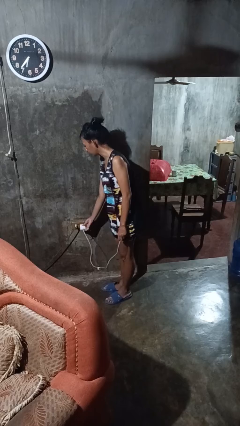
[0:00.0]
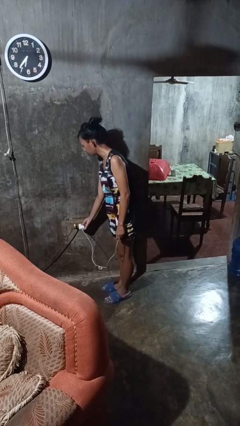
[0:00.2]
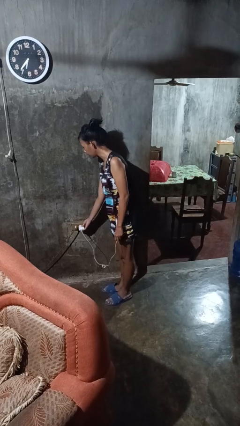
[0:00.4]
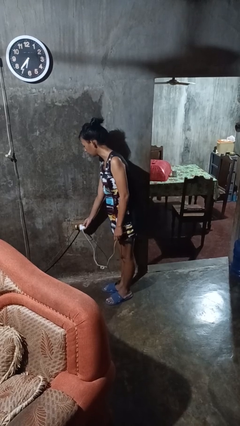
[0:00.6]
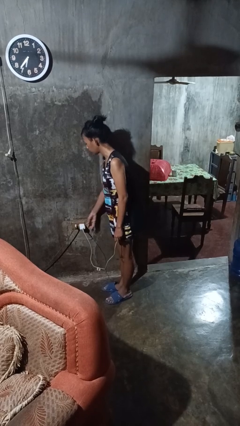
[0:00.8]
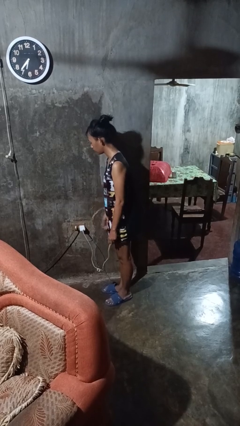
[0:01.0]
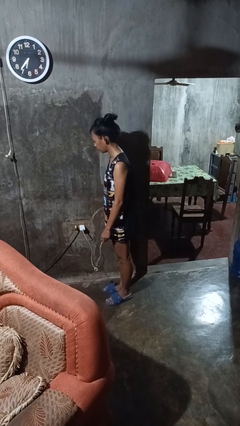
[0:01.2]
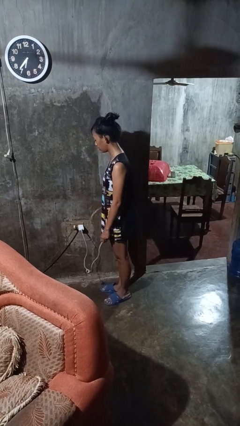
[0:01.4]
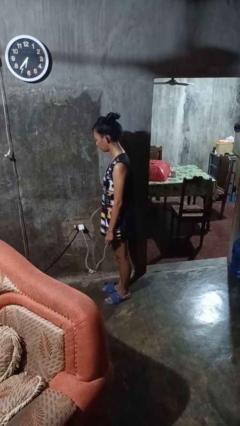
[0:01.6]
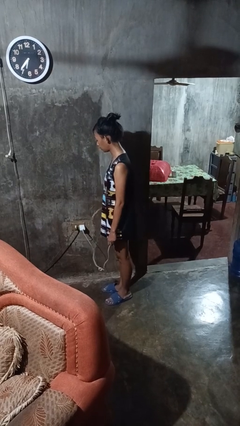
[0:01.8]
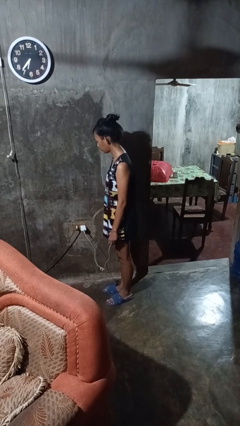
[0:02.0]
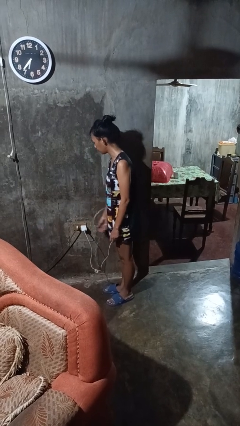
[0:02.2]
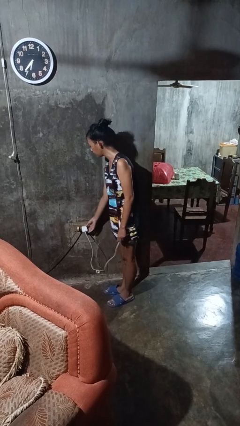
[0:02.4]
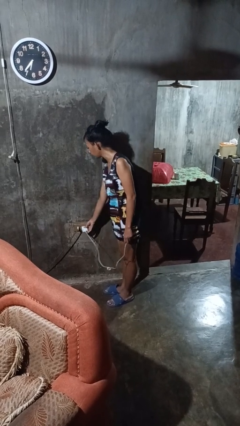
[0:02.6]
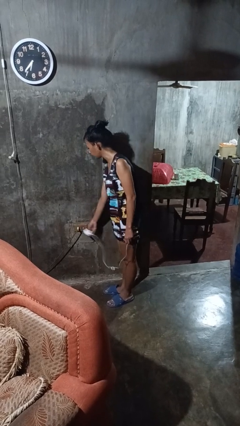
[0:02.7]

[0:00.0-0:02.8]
person plugs into electrical socket

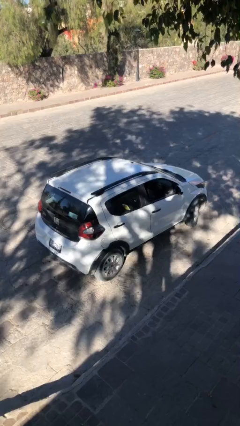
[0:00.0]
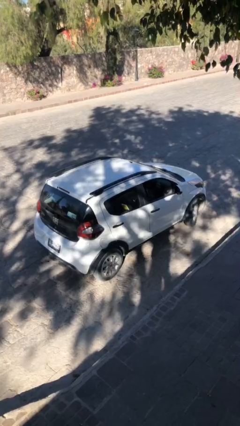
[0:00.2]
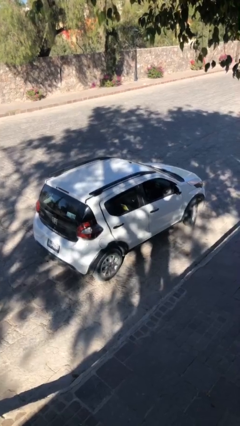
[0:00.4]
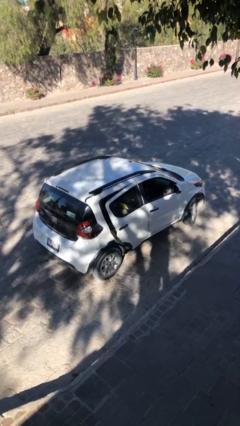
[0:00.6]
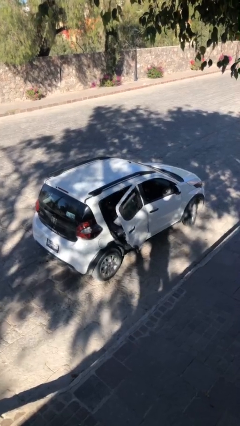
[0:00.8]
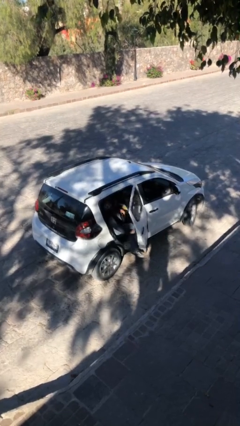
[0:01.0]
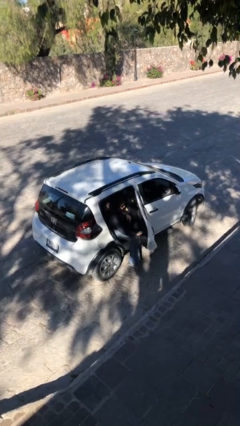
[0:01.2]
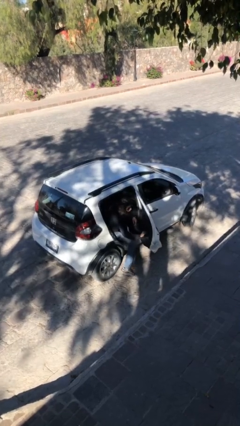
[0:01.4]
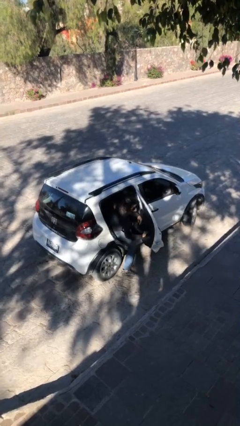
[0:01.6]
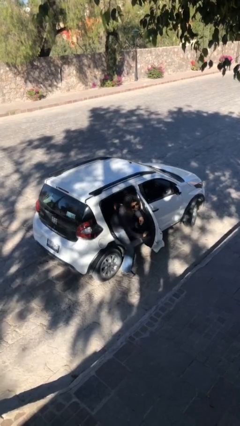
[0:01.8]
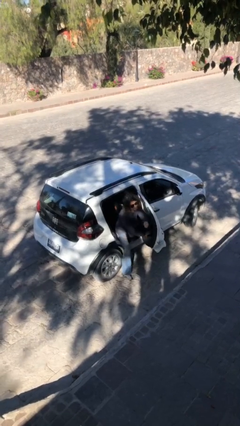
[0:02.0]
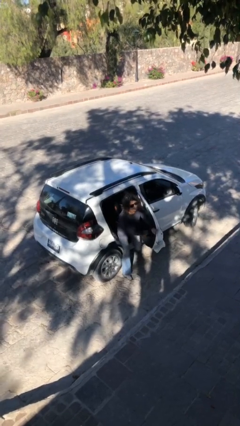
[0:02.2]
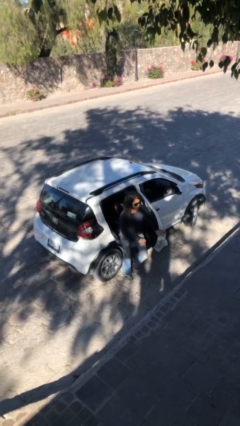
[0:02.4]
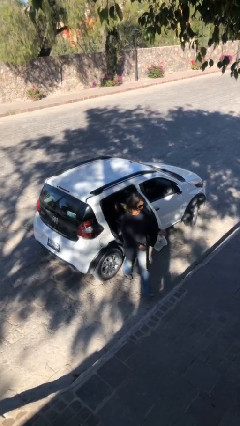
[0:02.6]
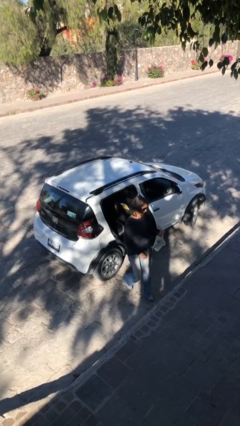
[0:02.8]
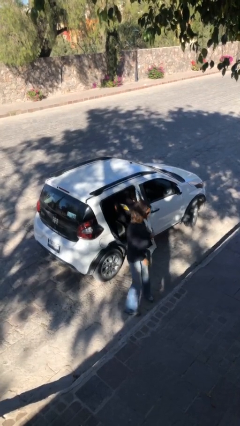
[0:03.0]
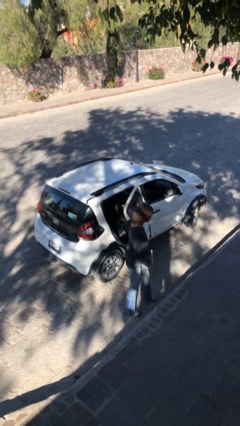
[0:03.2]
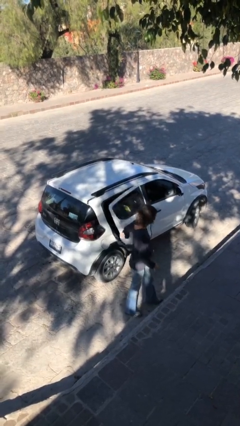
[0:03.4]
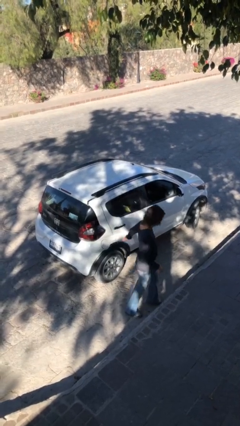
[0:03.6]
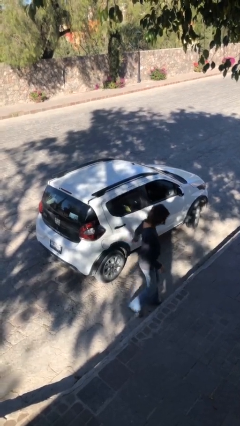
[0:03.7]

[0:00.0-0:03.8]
car drops off person

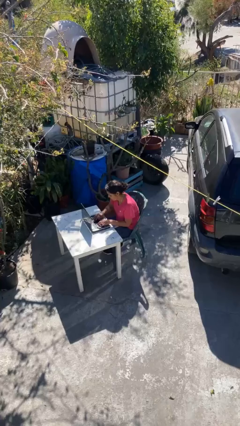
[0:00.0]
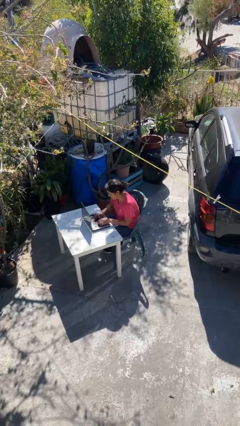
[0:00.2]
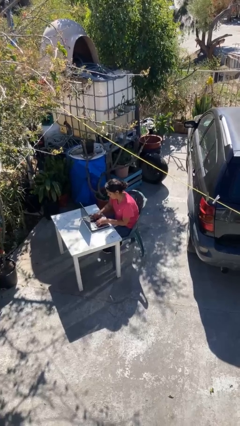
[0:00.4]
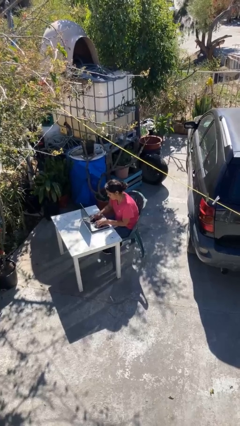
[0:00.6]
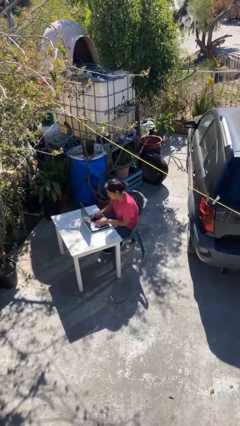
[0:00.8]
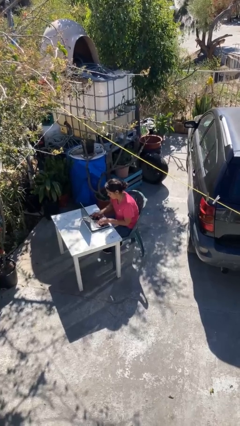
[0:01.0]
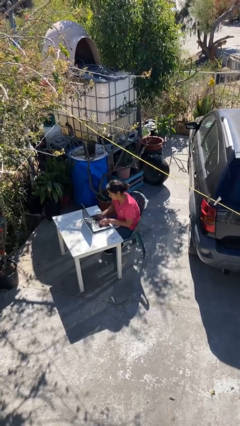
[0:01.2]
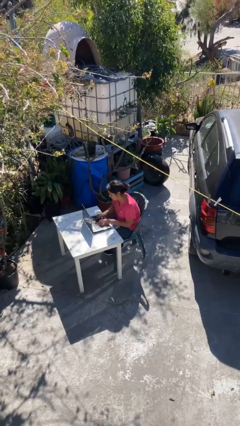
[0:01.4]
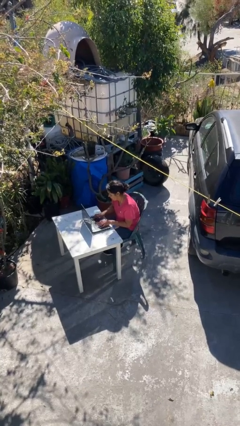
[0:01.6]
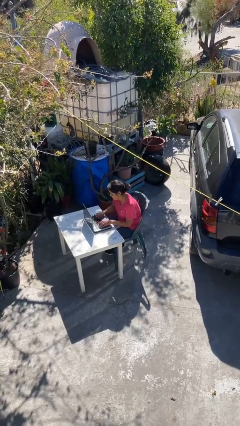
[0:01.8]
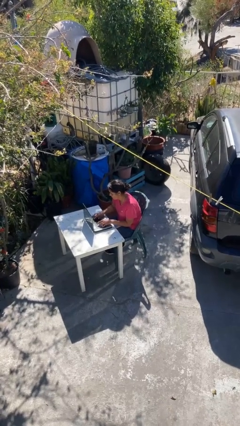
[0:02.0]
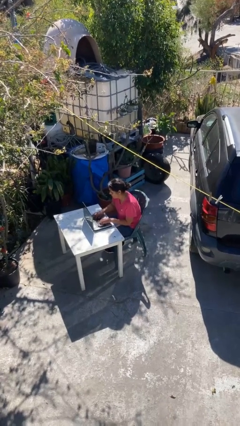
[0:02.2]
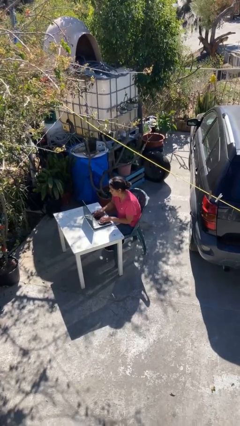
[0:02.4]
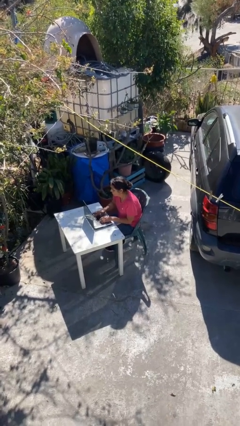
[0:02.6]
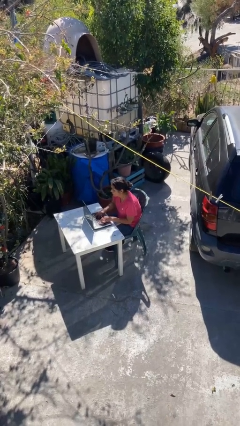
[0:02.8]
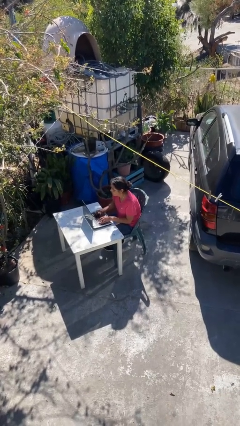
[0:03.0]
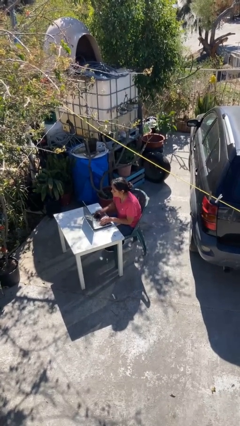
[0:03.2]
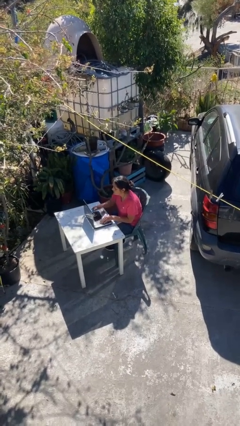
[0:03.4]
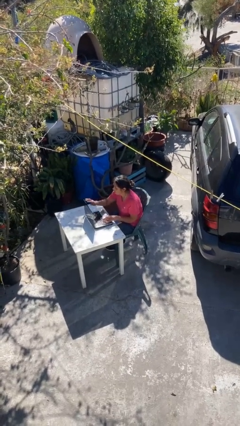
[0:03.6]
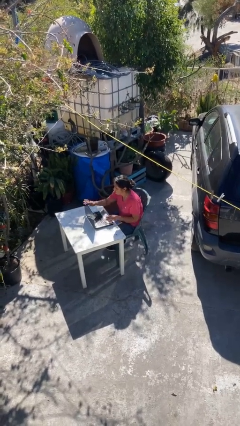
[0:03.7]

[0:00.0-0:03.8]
person interacts with laptop

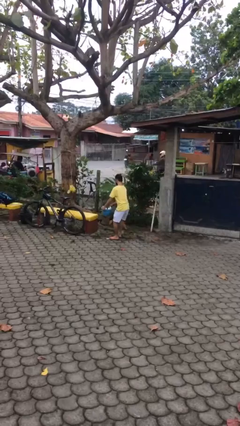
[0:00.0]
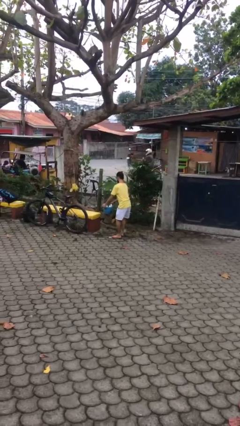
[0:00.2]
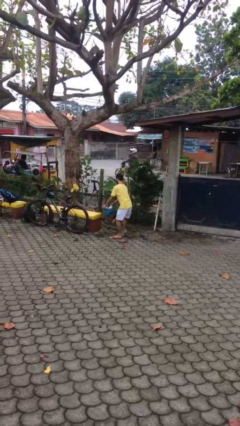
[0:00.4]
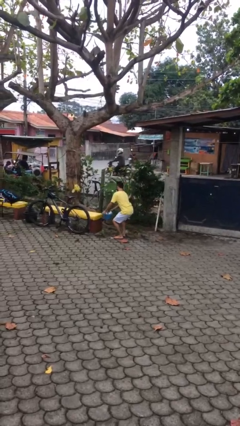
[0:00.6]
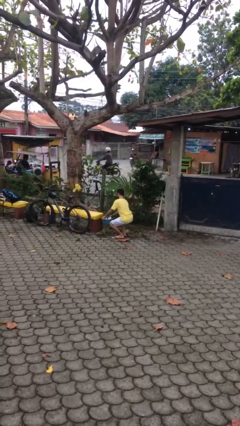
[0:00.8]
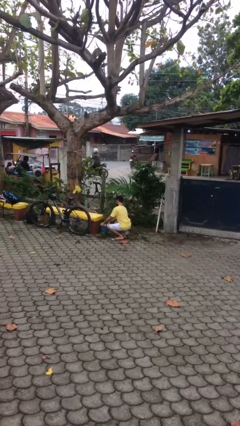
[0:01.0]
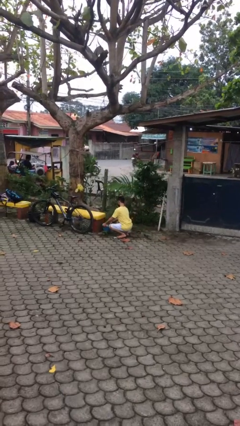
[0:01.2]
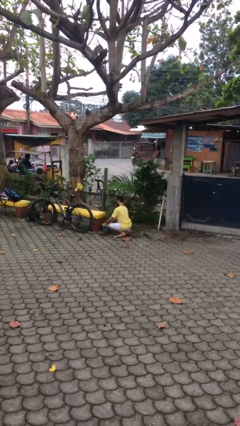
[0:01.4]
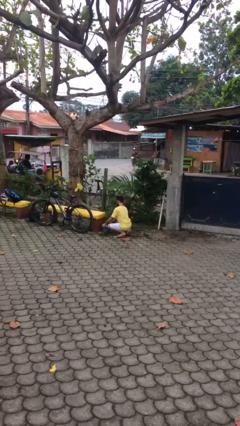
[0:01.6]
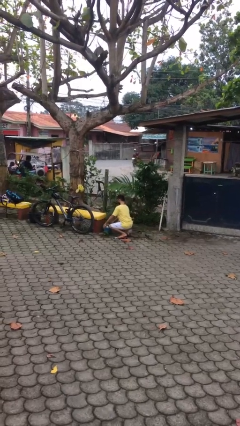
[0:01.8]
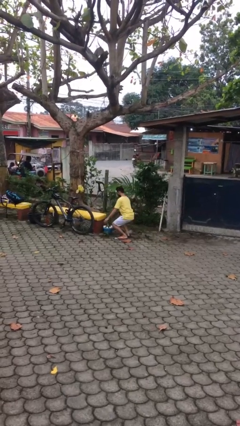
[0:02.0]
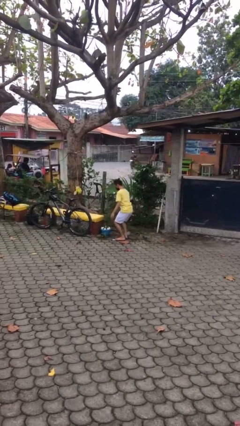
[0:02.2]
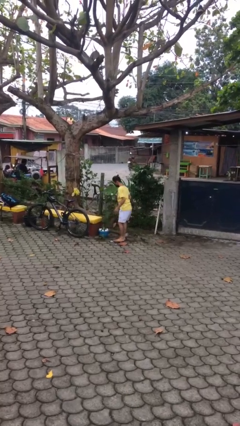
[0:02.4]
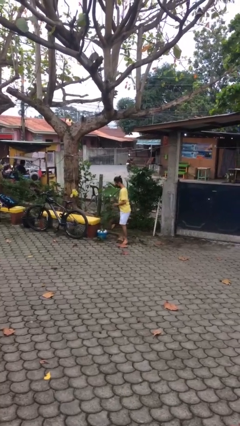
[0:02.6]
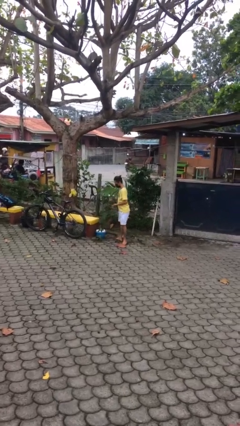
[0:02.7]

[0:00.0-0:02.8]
person puts down object on floor

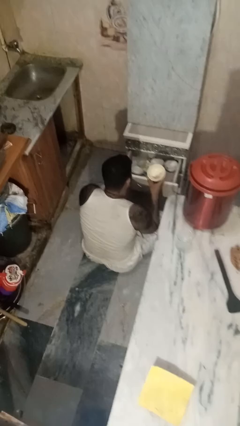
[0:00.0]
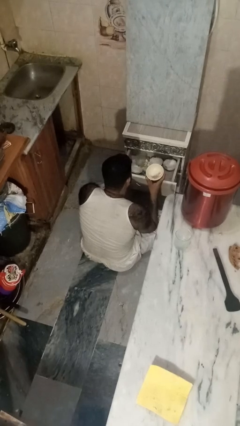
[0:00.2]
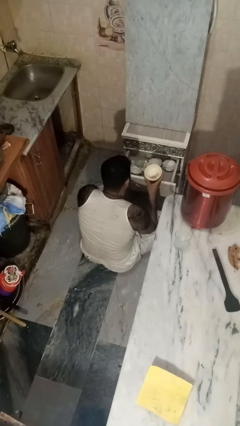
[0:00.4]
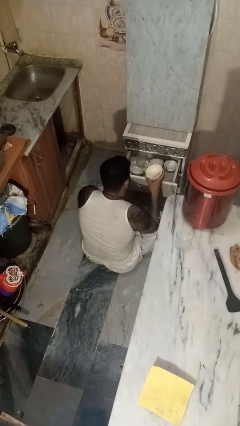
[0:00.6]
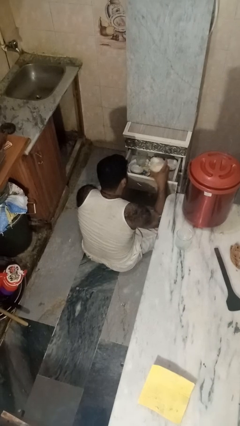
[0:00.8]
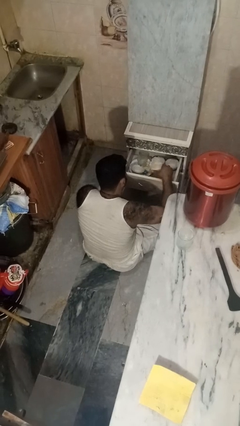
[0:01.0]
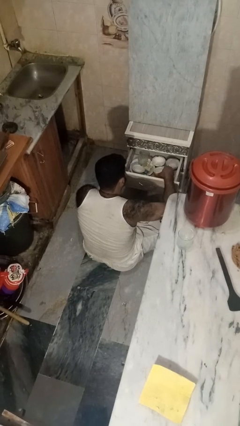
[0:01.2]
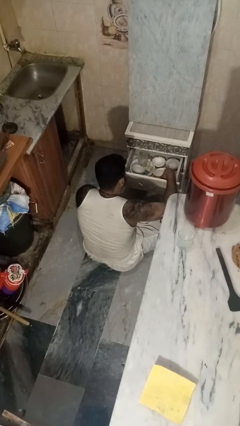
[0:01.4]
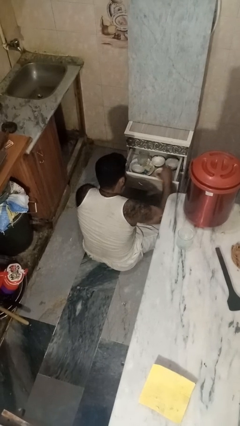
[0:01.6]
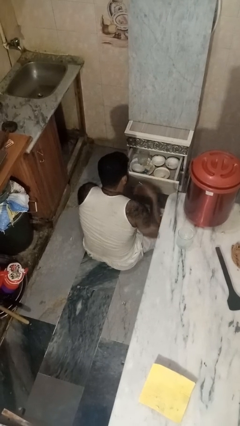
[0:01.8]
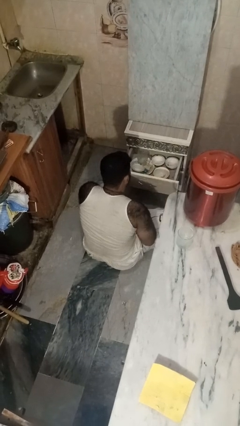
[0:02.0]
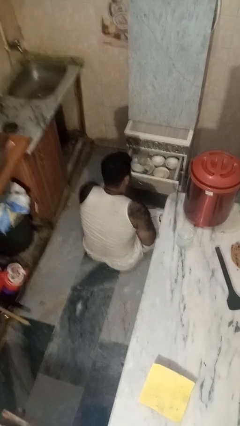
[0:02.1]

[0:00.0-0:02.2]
person puts object into kitchen drawer

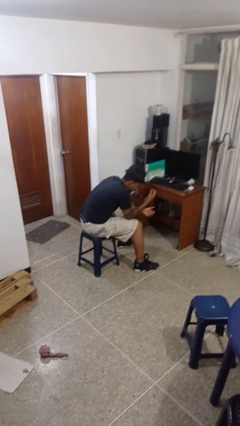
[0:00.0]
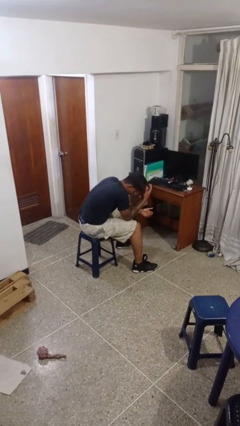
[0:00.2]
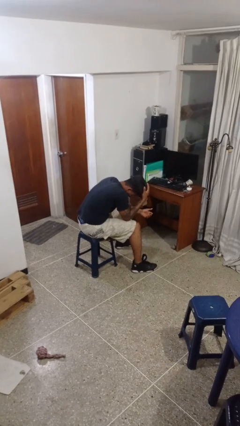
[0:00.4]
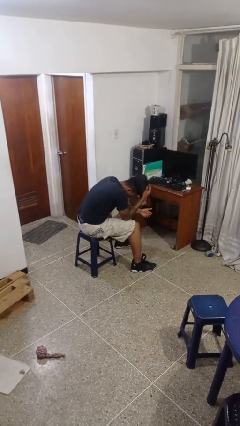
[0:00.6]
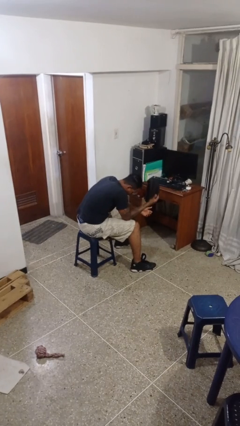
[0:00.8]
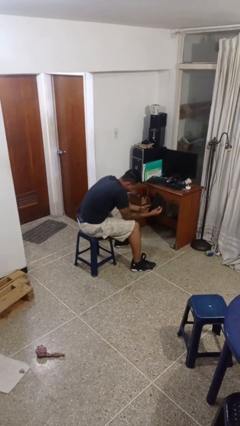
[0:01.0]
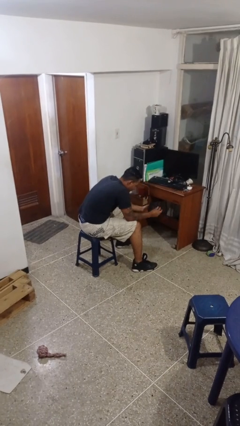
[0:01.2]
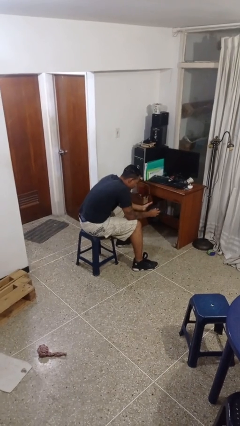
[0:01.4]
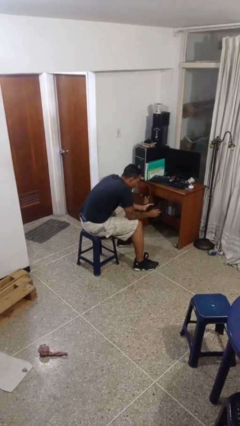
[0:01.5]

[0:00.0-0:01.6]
person takes off hat

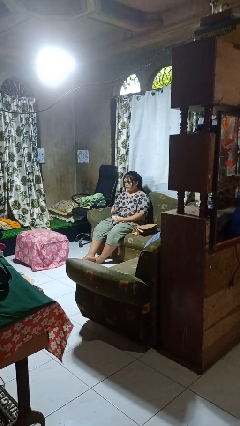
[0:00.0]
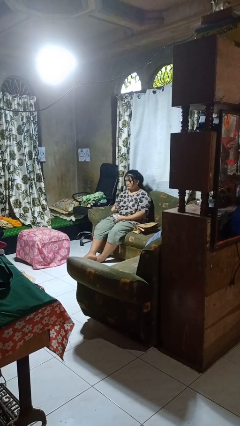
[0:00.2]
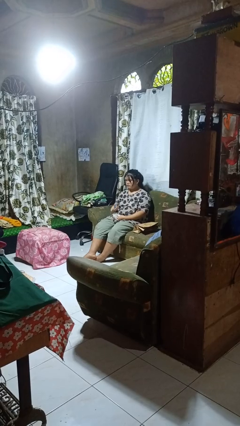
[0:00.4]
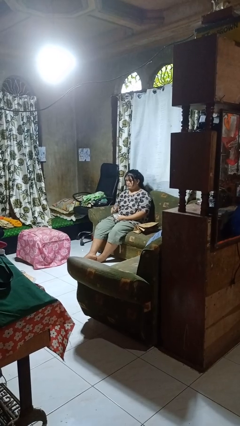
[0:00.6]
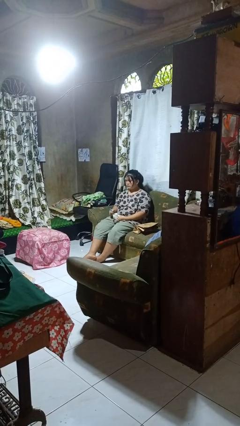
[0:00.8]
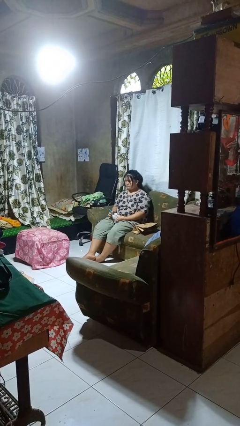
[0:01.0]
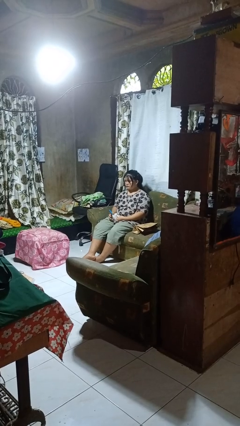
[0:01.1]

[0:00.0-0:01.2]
person stirs mug
